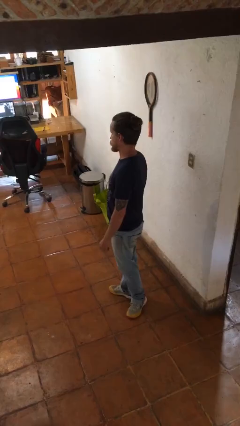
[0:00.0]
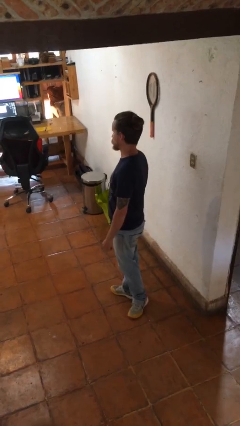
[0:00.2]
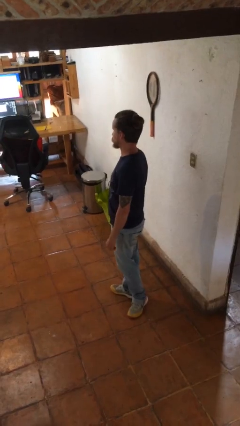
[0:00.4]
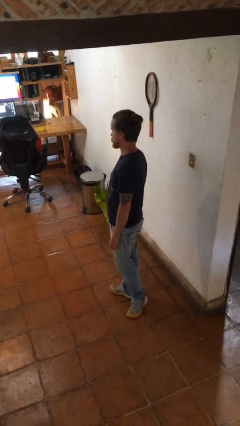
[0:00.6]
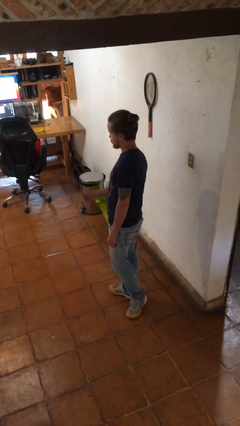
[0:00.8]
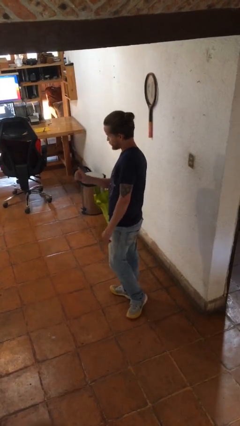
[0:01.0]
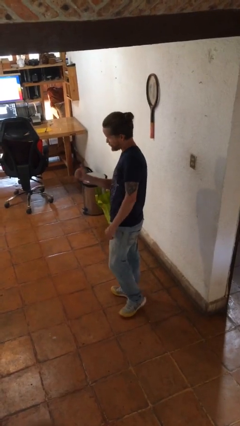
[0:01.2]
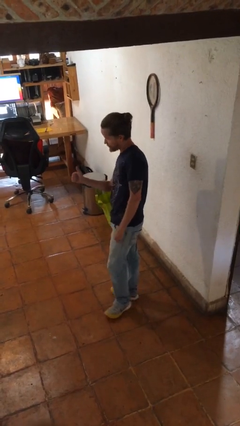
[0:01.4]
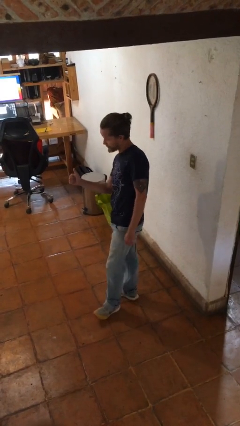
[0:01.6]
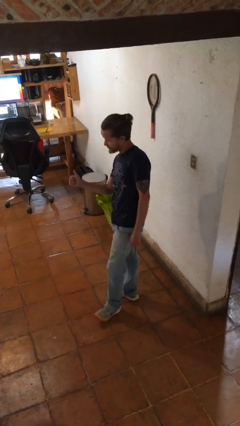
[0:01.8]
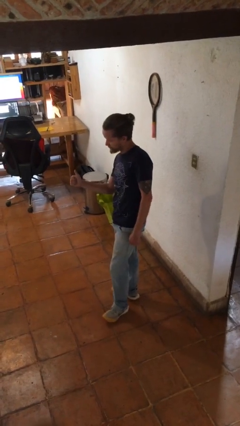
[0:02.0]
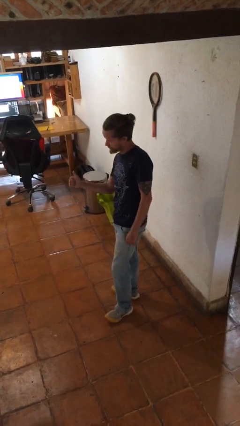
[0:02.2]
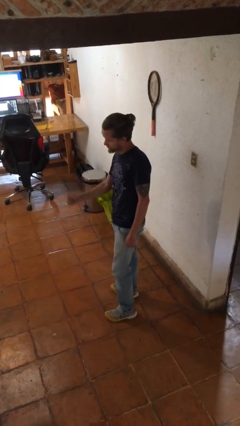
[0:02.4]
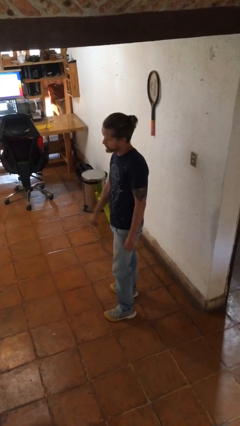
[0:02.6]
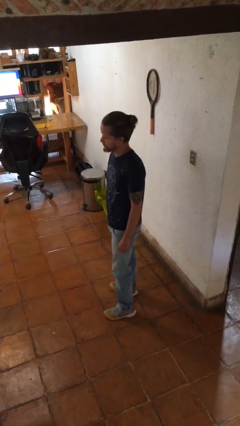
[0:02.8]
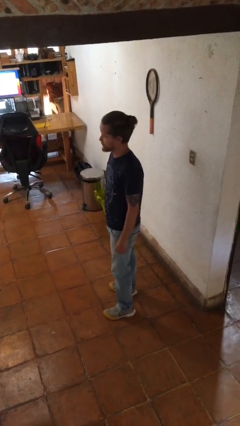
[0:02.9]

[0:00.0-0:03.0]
person gestures thumbs up

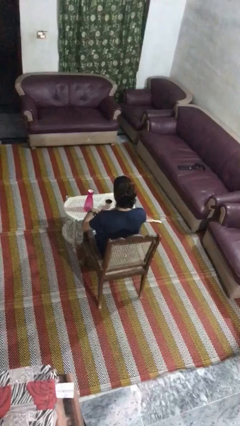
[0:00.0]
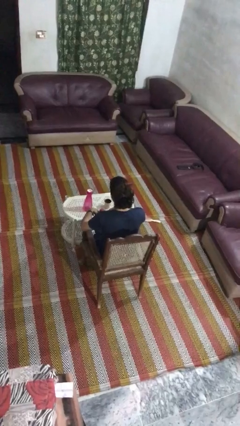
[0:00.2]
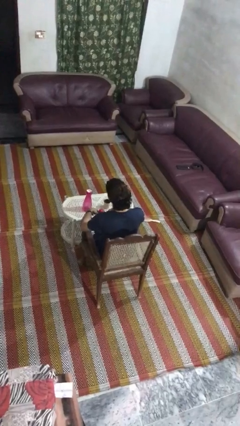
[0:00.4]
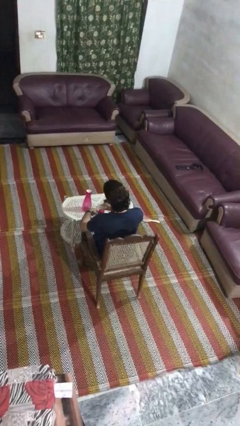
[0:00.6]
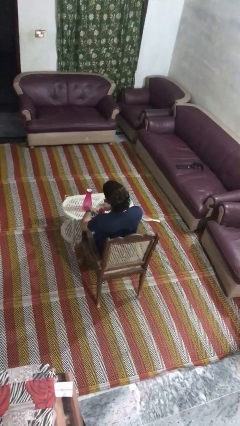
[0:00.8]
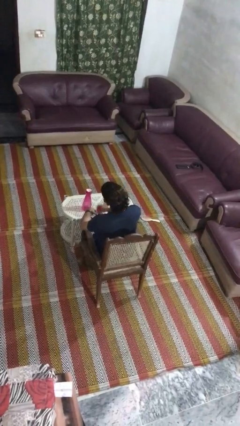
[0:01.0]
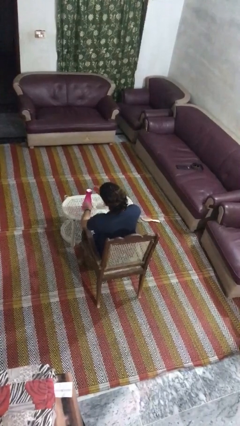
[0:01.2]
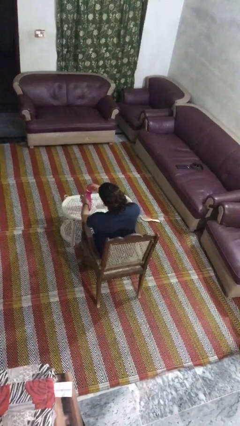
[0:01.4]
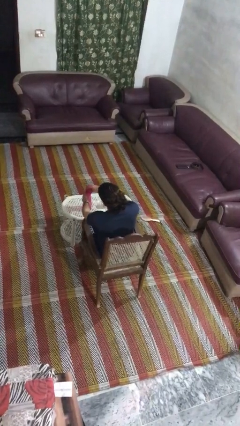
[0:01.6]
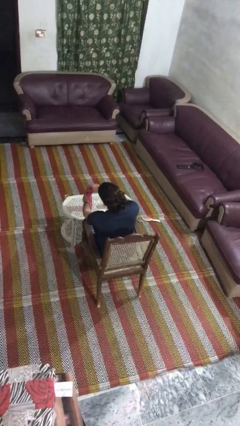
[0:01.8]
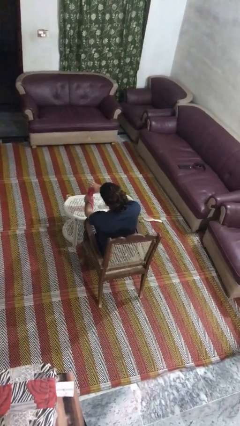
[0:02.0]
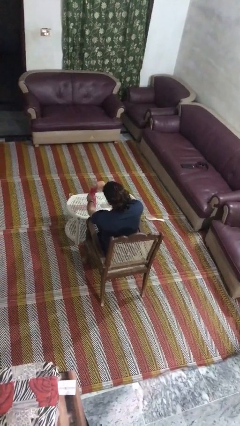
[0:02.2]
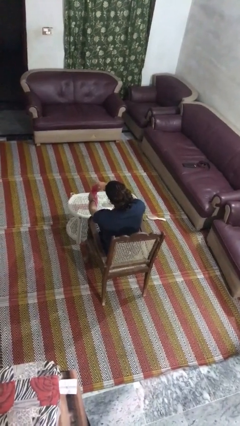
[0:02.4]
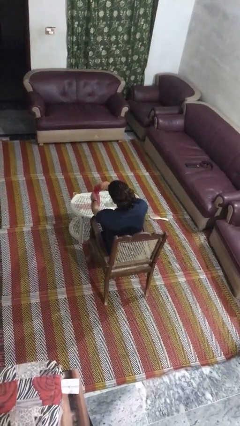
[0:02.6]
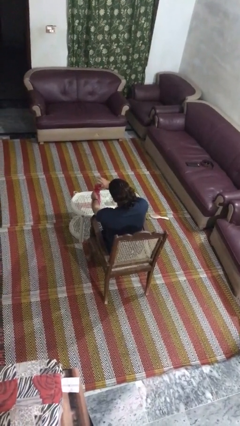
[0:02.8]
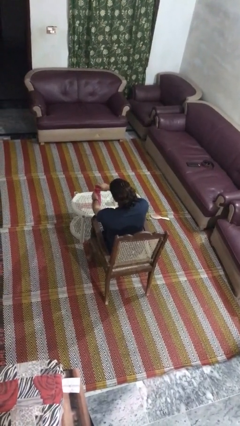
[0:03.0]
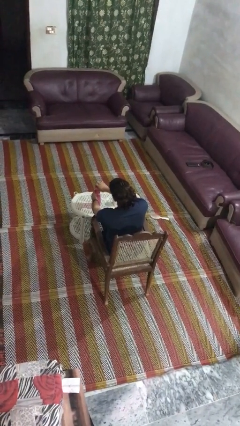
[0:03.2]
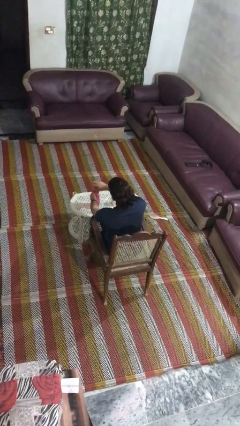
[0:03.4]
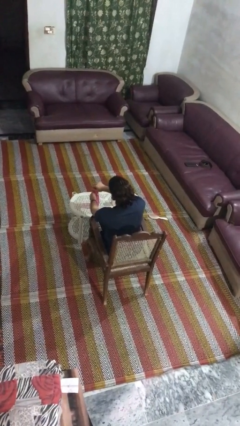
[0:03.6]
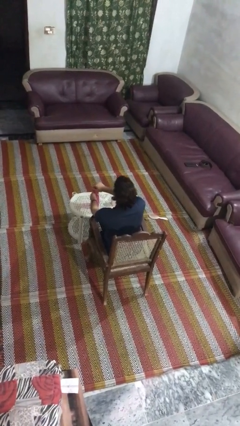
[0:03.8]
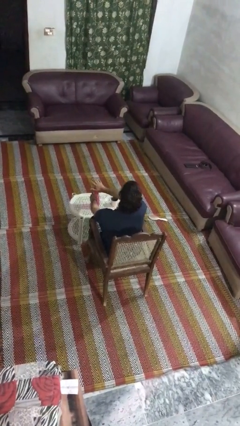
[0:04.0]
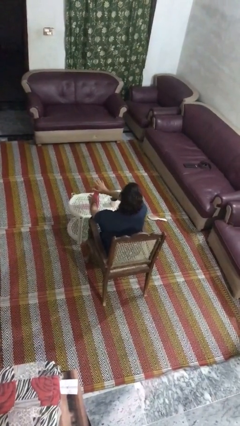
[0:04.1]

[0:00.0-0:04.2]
person screws lid to bottle

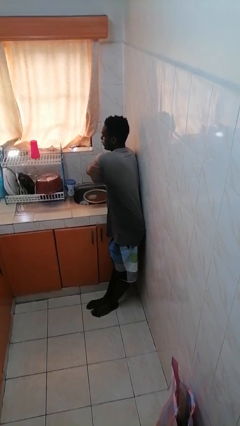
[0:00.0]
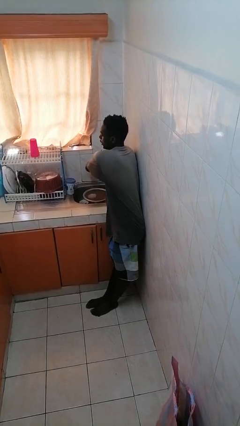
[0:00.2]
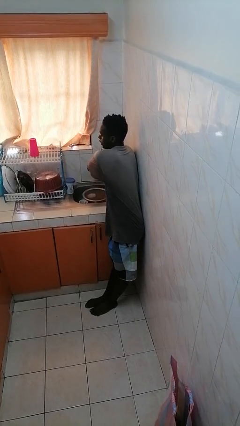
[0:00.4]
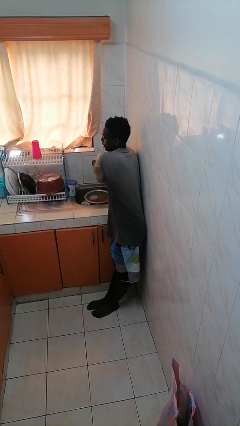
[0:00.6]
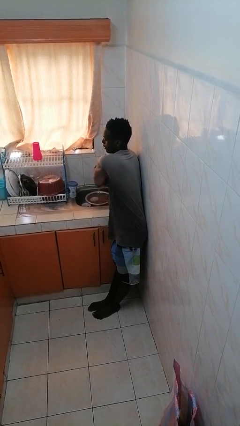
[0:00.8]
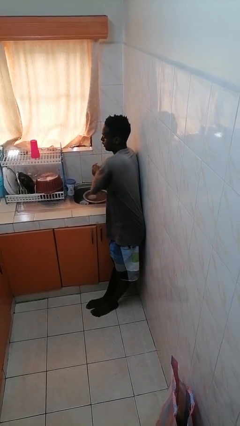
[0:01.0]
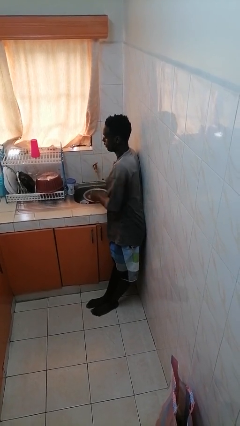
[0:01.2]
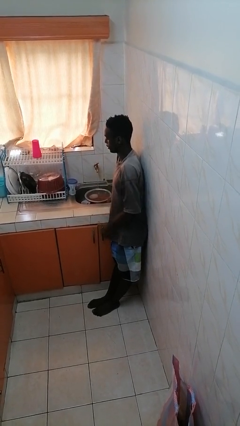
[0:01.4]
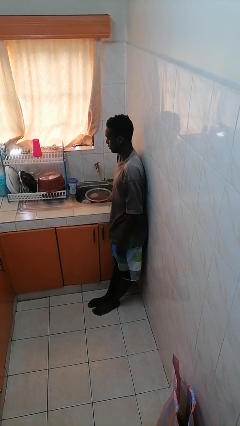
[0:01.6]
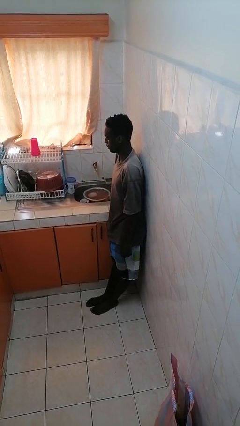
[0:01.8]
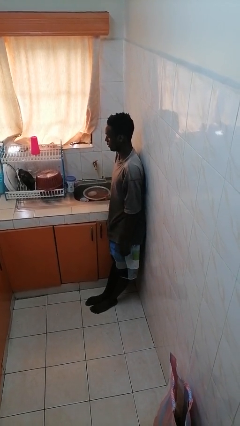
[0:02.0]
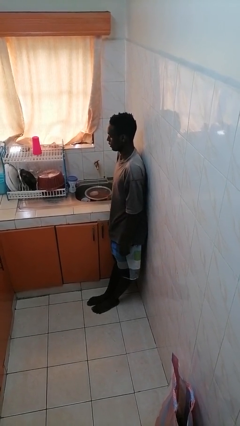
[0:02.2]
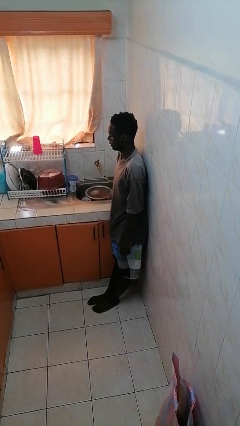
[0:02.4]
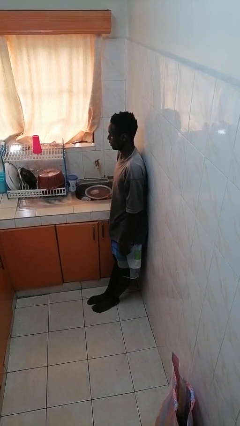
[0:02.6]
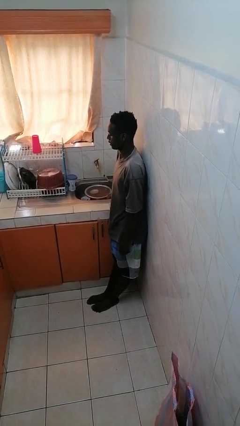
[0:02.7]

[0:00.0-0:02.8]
person turns on faucet

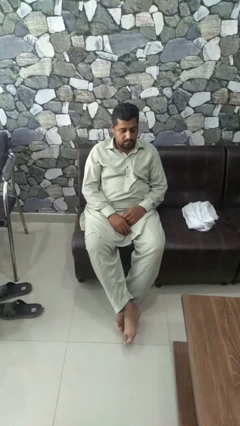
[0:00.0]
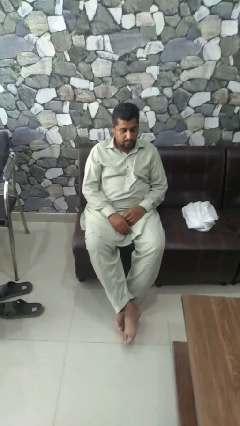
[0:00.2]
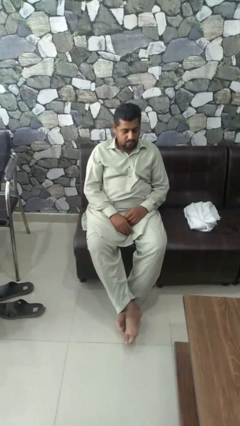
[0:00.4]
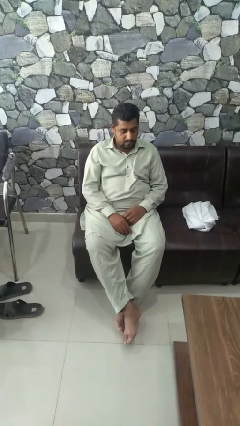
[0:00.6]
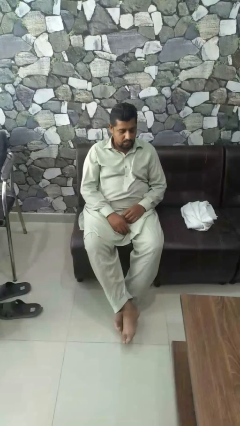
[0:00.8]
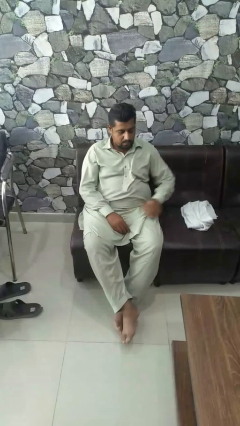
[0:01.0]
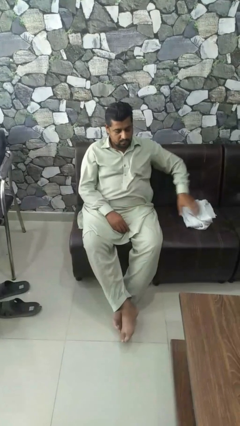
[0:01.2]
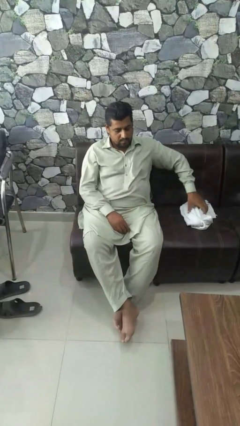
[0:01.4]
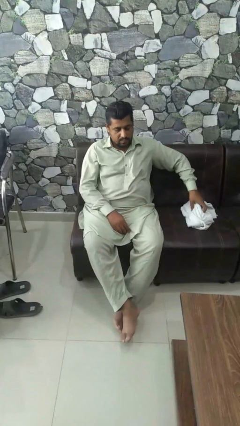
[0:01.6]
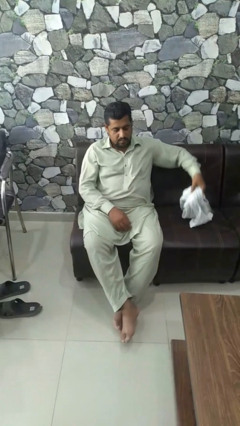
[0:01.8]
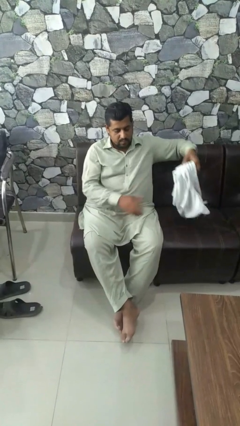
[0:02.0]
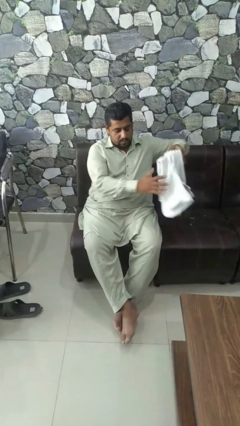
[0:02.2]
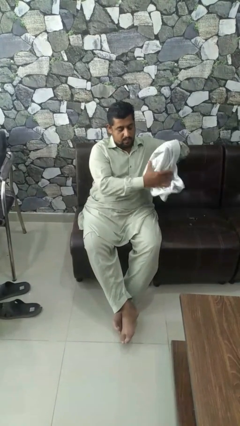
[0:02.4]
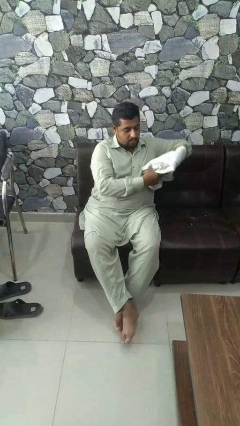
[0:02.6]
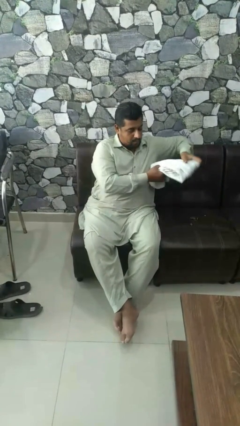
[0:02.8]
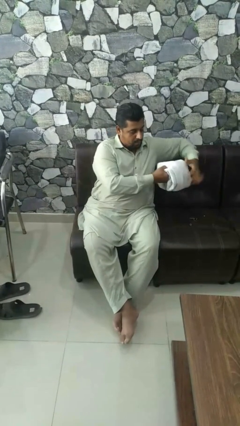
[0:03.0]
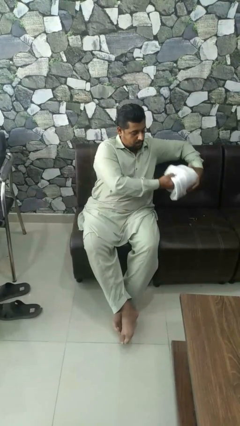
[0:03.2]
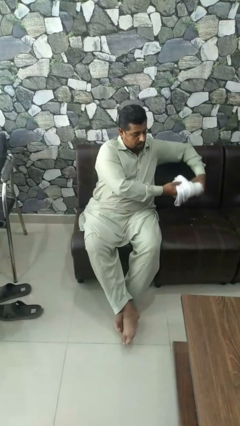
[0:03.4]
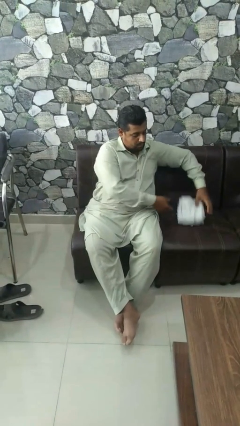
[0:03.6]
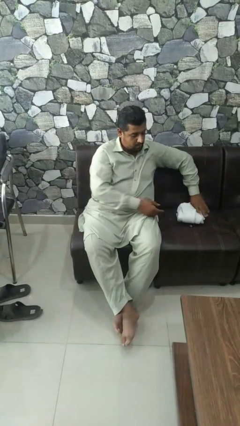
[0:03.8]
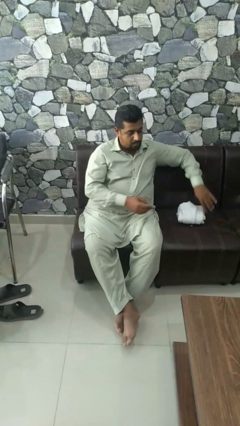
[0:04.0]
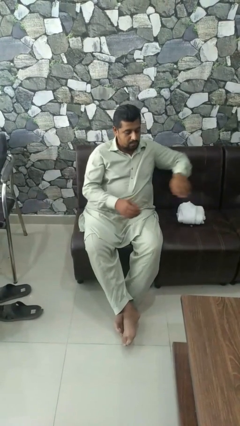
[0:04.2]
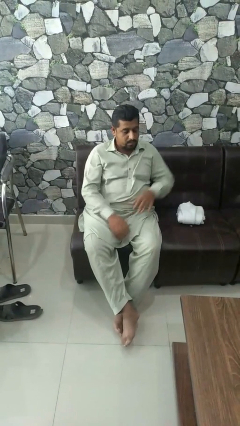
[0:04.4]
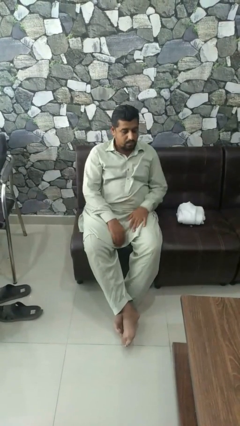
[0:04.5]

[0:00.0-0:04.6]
person folds shirt

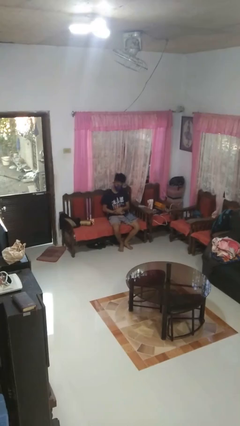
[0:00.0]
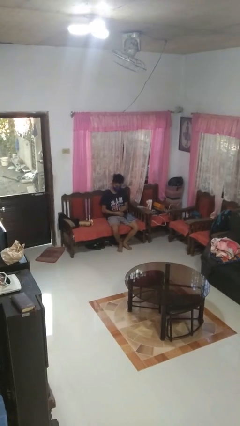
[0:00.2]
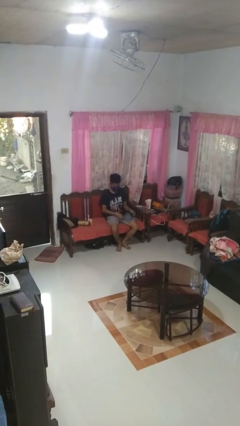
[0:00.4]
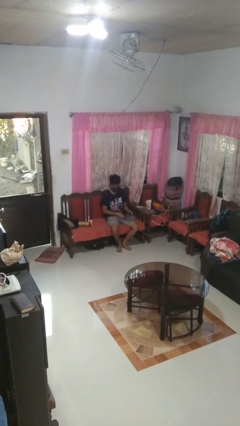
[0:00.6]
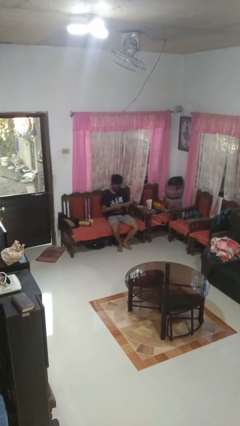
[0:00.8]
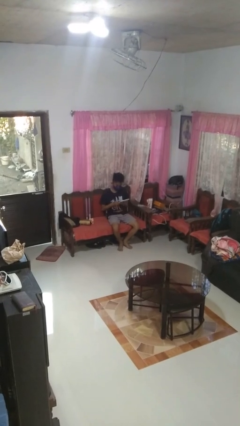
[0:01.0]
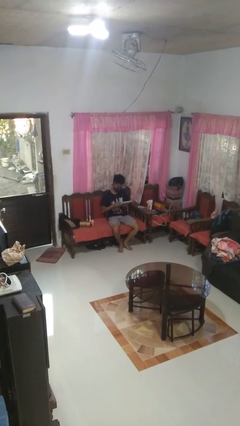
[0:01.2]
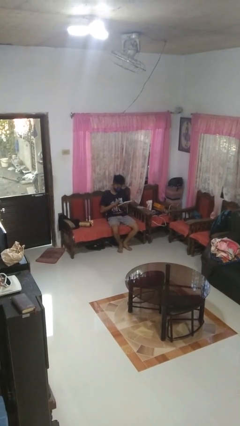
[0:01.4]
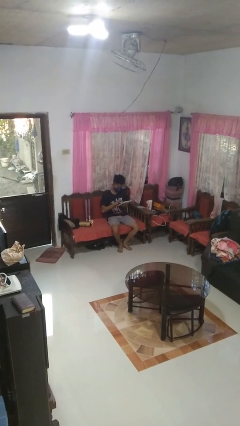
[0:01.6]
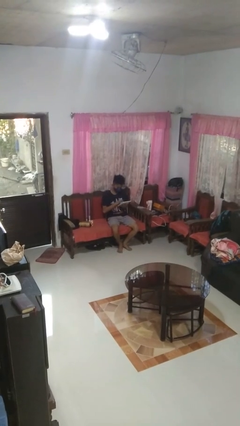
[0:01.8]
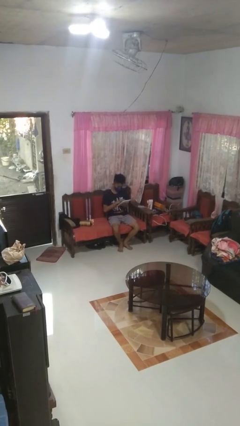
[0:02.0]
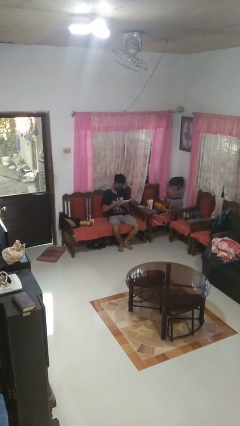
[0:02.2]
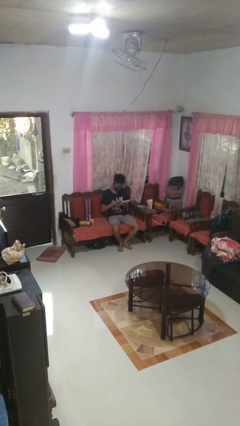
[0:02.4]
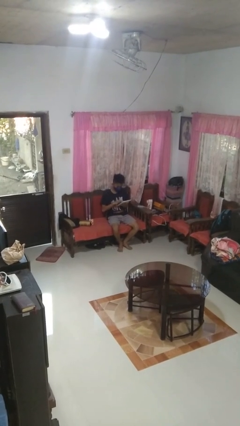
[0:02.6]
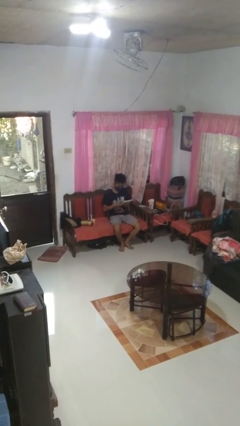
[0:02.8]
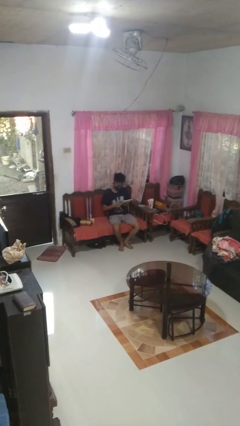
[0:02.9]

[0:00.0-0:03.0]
person interacts with tablet

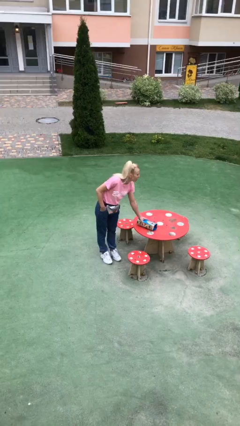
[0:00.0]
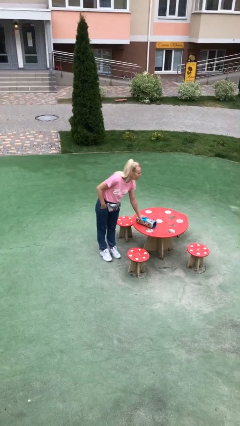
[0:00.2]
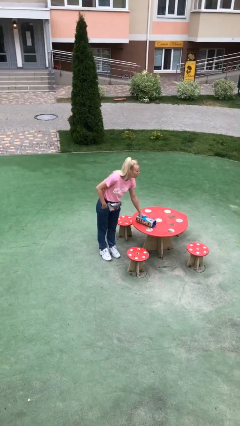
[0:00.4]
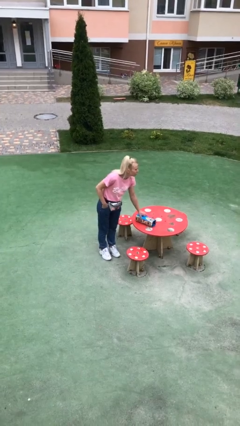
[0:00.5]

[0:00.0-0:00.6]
person puts down object on table
